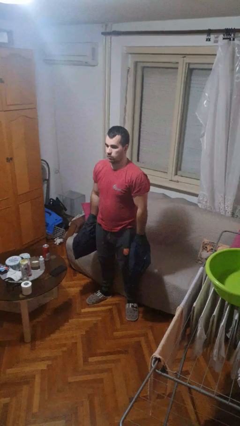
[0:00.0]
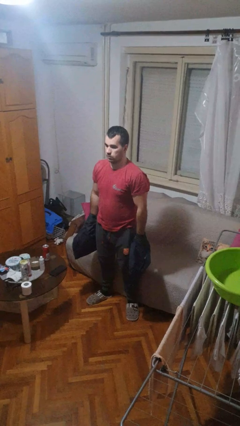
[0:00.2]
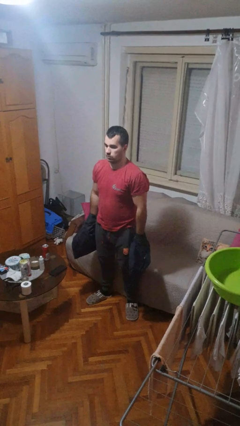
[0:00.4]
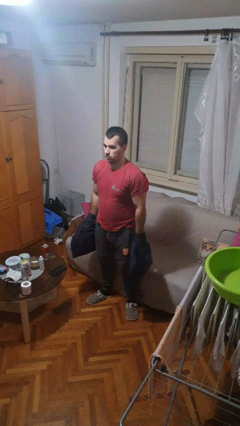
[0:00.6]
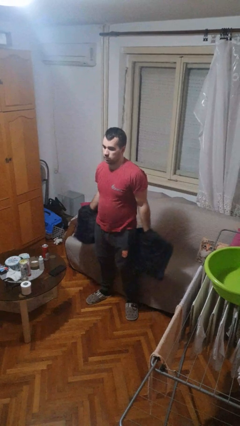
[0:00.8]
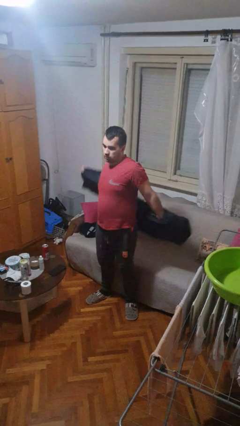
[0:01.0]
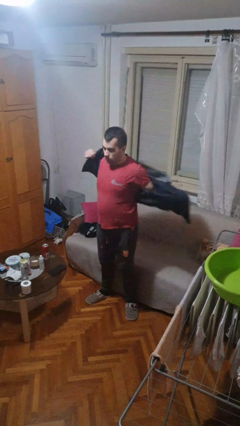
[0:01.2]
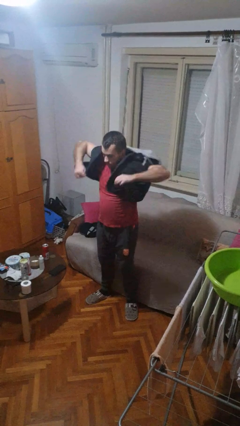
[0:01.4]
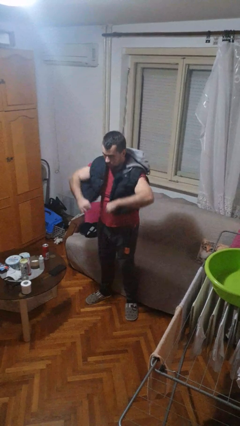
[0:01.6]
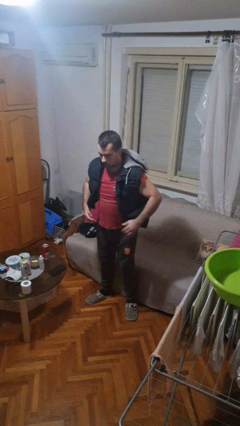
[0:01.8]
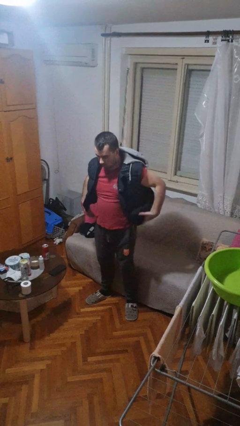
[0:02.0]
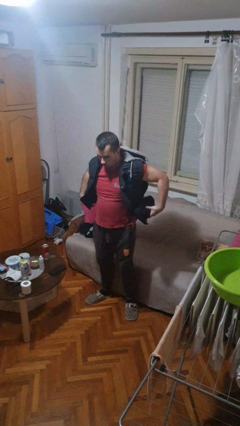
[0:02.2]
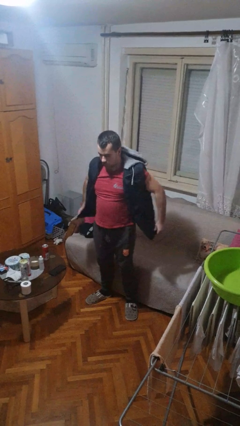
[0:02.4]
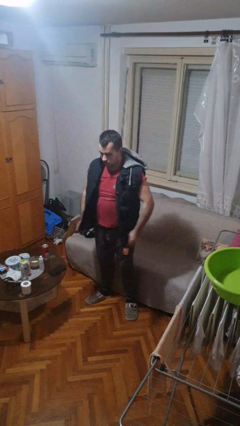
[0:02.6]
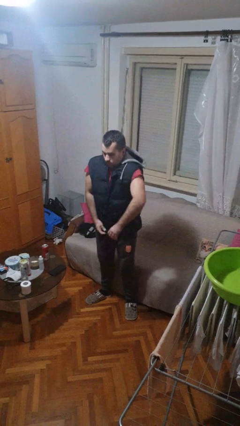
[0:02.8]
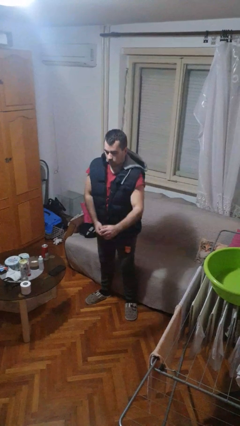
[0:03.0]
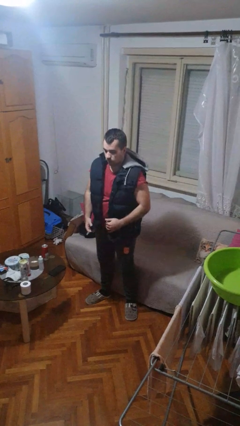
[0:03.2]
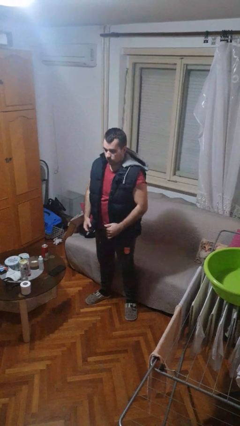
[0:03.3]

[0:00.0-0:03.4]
person puts on jacket

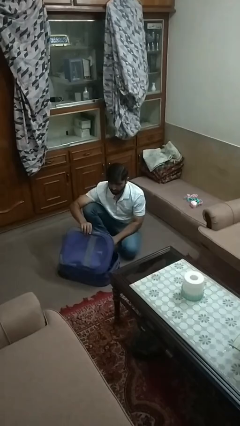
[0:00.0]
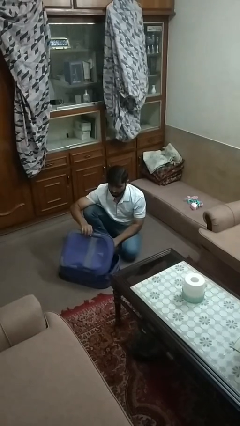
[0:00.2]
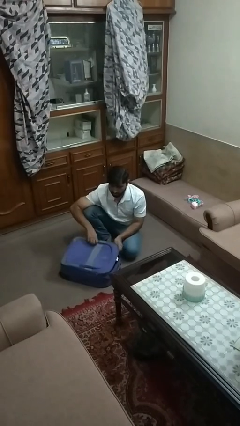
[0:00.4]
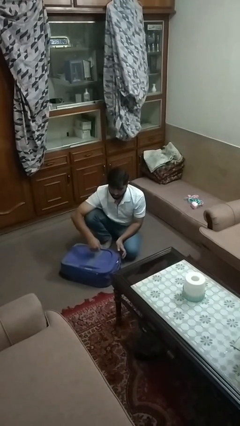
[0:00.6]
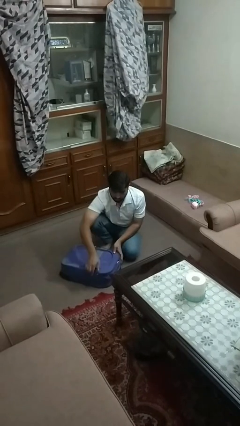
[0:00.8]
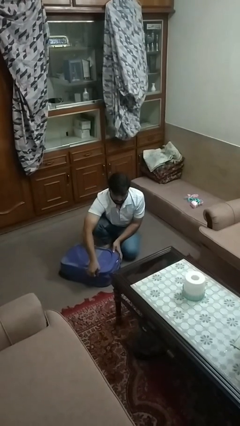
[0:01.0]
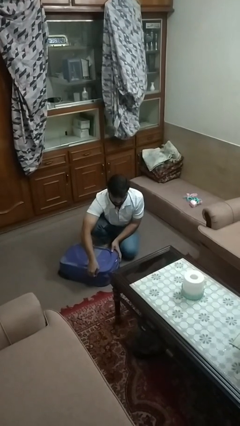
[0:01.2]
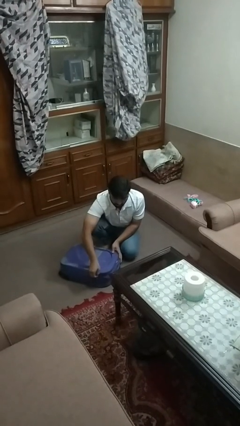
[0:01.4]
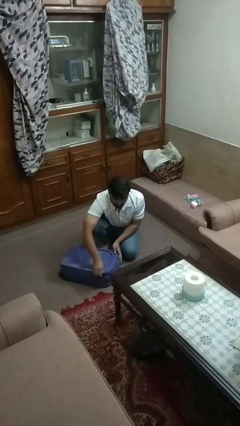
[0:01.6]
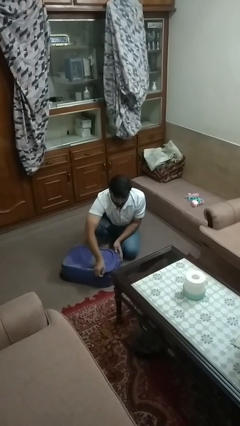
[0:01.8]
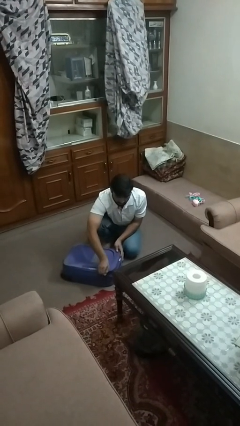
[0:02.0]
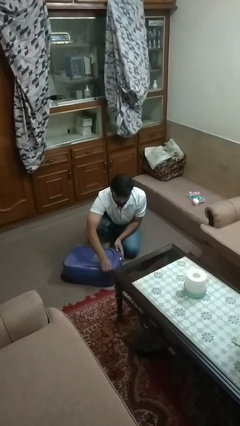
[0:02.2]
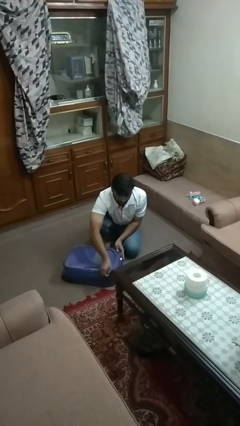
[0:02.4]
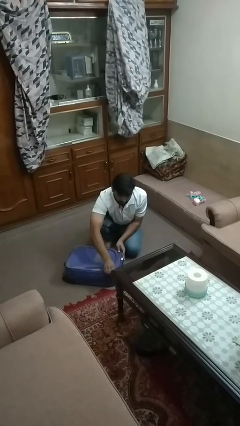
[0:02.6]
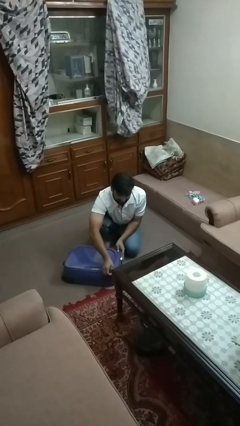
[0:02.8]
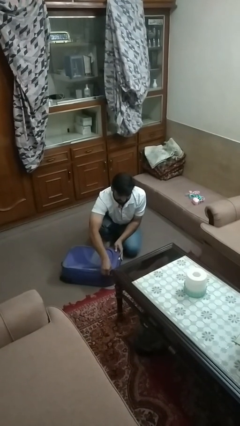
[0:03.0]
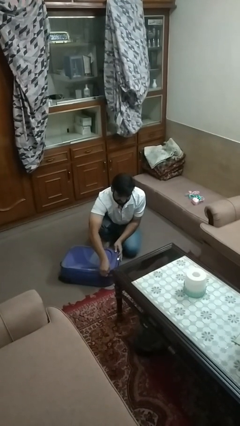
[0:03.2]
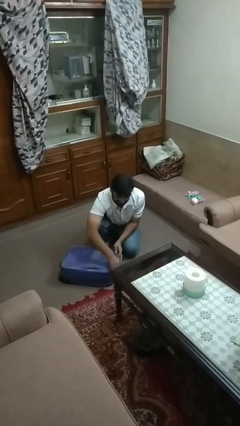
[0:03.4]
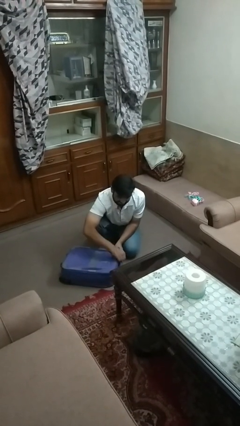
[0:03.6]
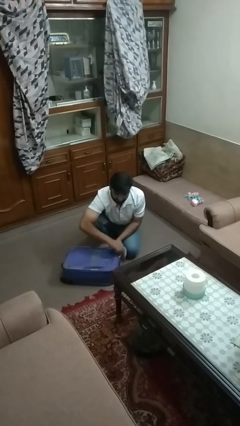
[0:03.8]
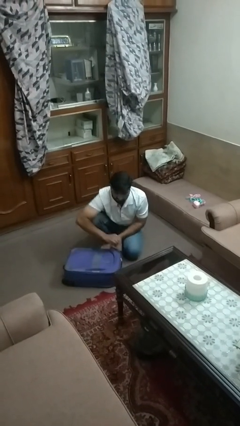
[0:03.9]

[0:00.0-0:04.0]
person closes suitcase

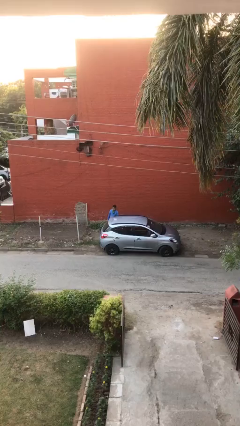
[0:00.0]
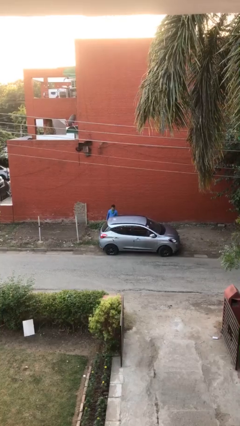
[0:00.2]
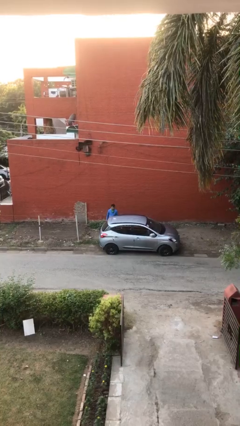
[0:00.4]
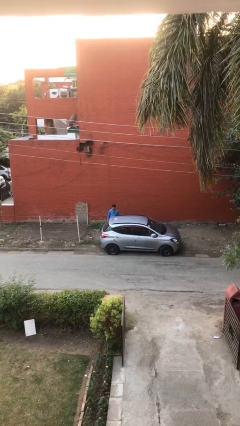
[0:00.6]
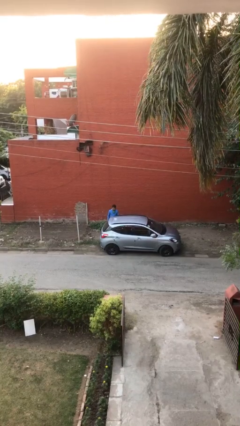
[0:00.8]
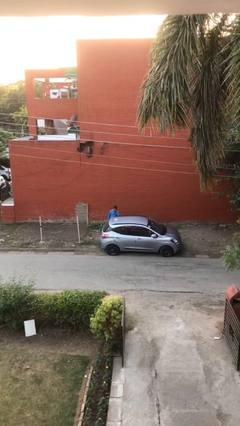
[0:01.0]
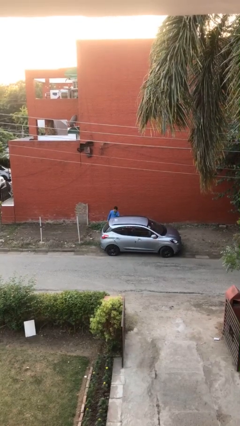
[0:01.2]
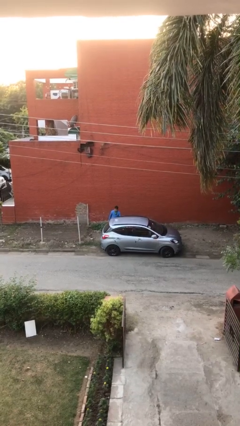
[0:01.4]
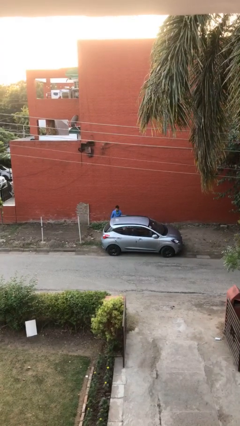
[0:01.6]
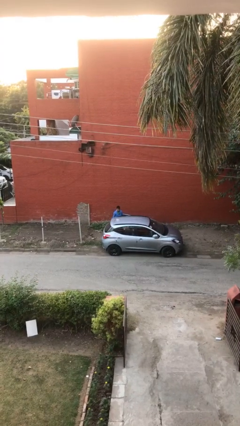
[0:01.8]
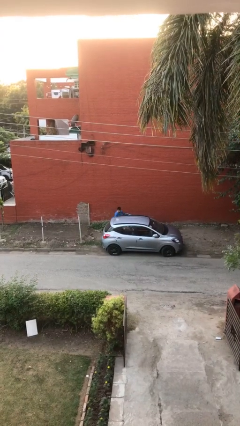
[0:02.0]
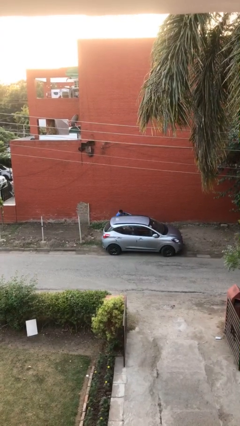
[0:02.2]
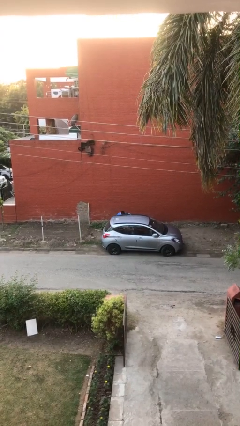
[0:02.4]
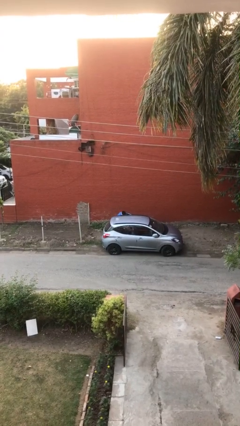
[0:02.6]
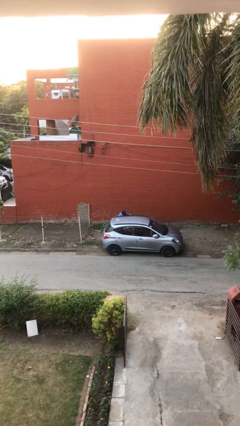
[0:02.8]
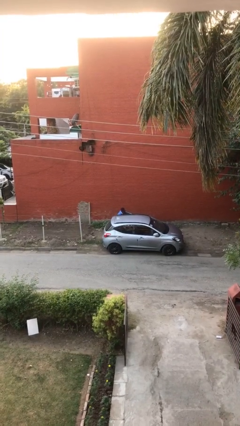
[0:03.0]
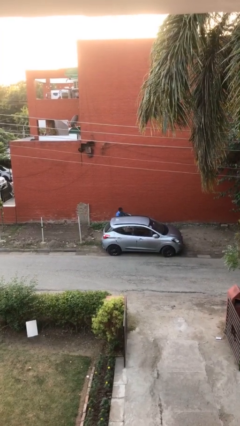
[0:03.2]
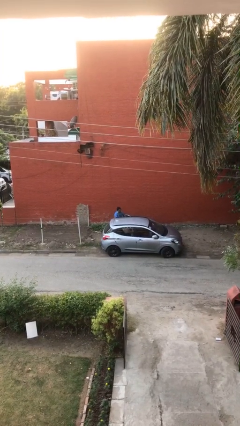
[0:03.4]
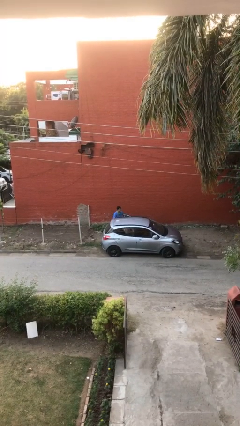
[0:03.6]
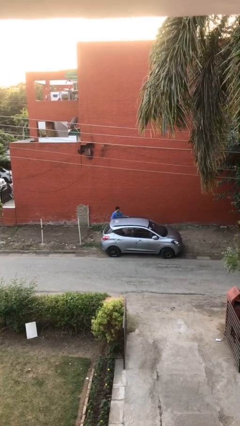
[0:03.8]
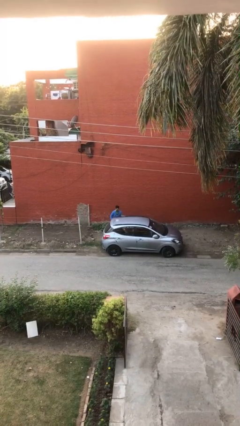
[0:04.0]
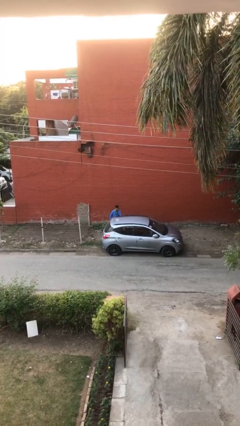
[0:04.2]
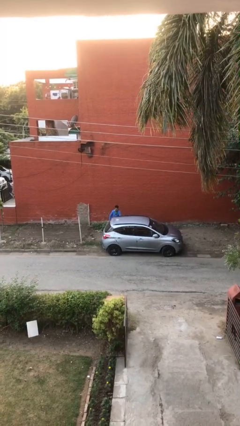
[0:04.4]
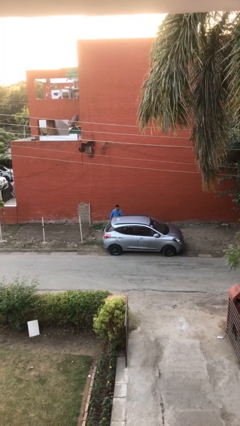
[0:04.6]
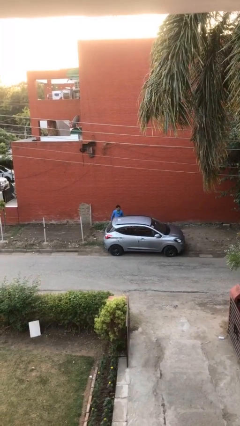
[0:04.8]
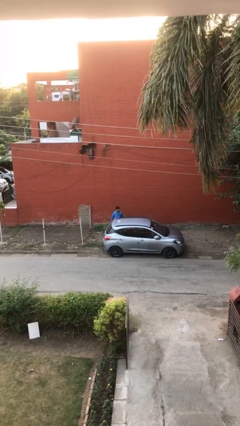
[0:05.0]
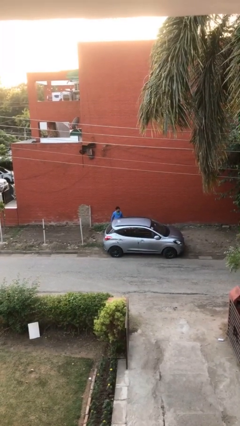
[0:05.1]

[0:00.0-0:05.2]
person unloads car

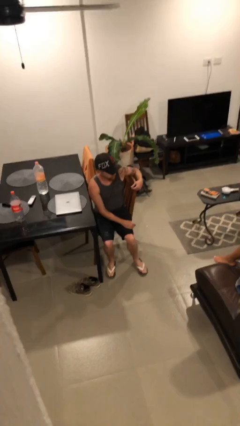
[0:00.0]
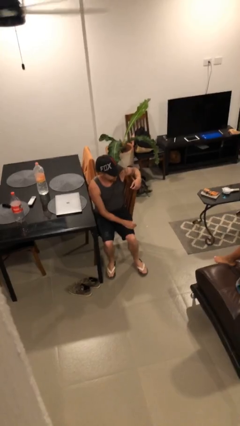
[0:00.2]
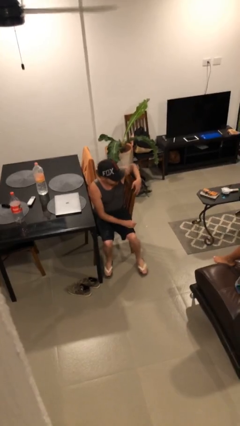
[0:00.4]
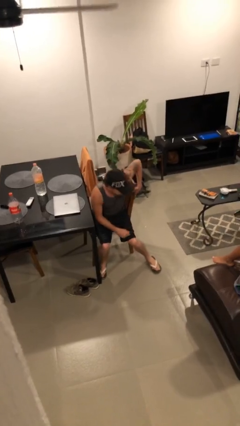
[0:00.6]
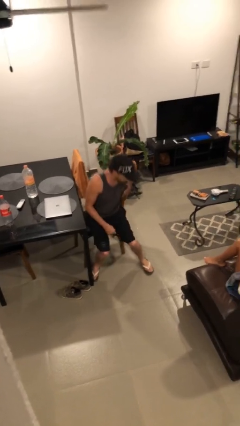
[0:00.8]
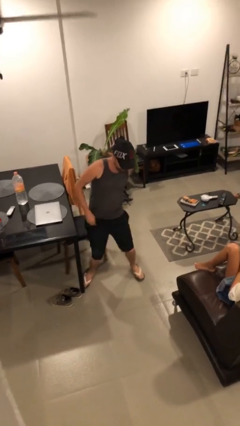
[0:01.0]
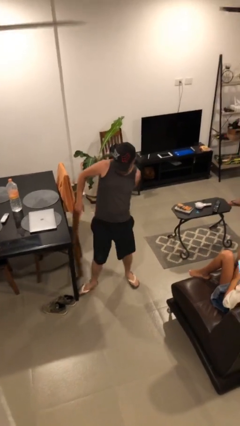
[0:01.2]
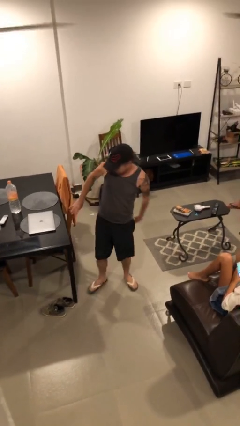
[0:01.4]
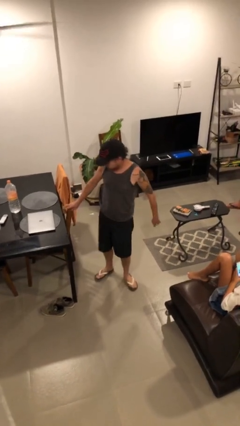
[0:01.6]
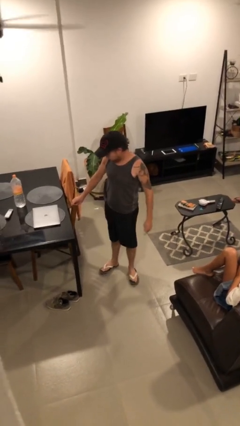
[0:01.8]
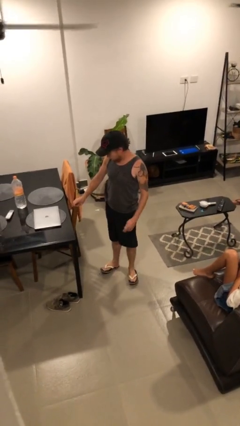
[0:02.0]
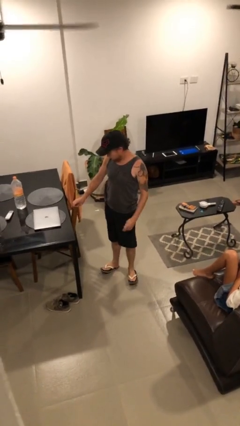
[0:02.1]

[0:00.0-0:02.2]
person stands up

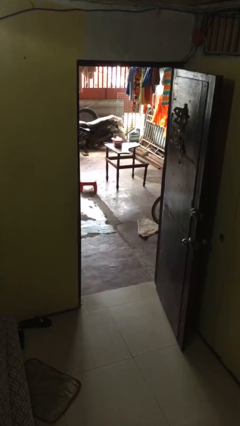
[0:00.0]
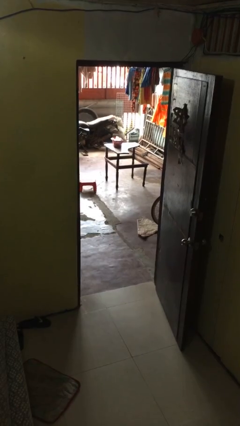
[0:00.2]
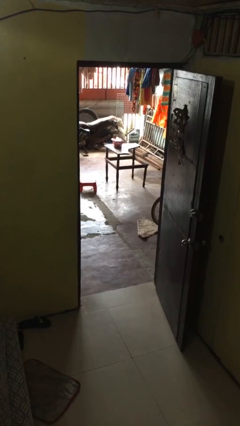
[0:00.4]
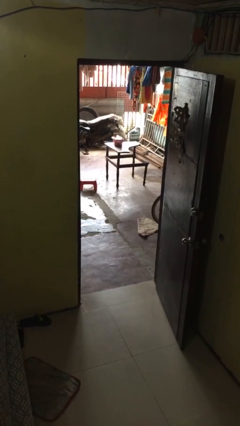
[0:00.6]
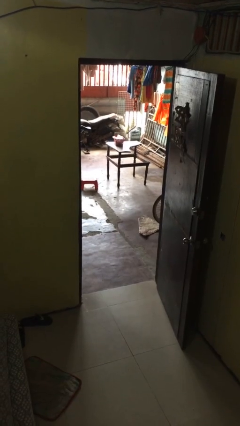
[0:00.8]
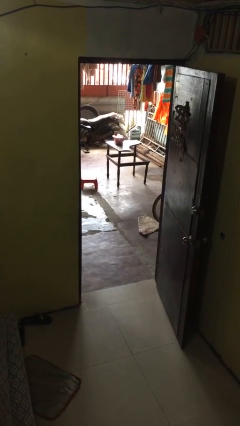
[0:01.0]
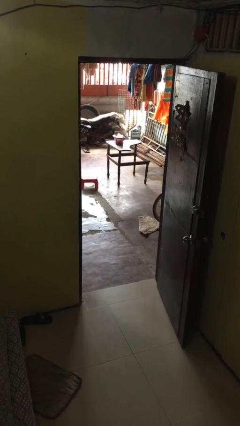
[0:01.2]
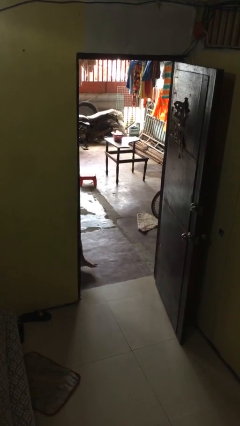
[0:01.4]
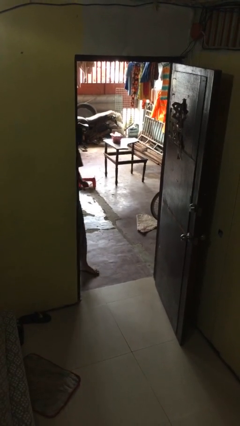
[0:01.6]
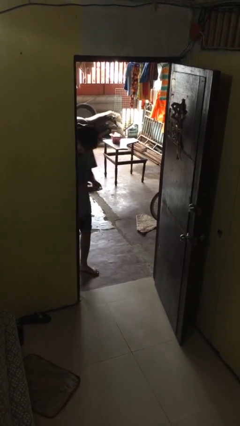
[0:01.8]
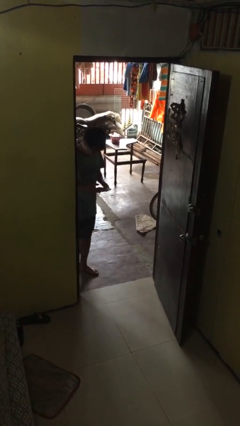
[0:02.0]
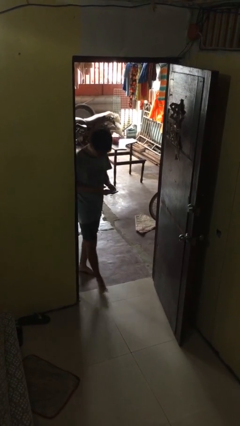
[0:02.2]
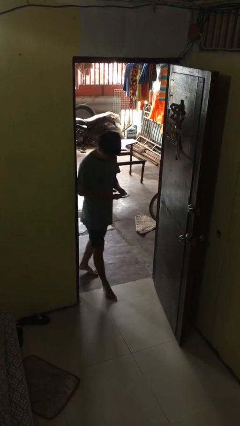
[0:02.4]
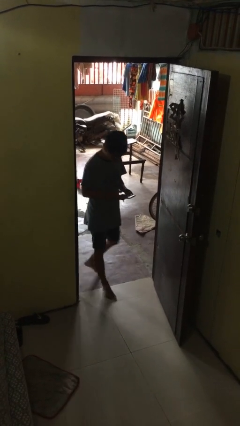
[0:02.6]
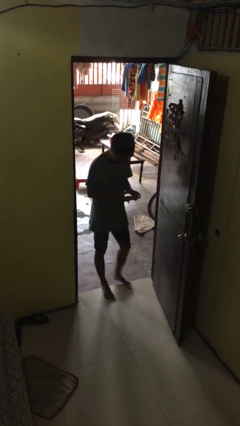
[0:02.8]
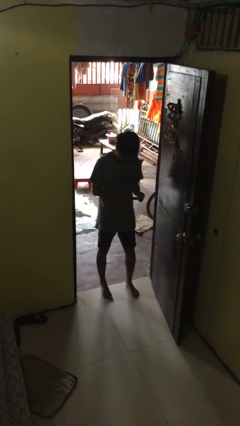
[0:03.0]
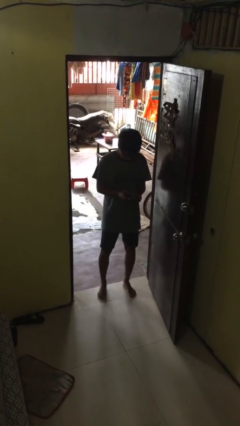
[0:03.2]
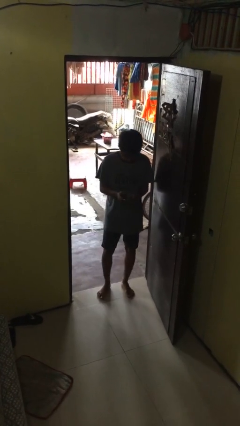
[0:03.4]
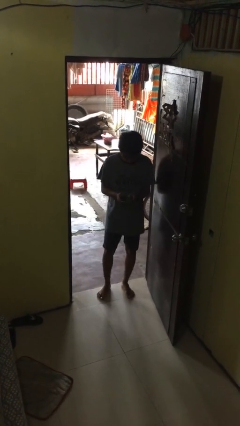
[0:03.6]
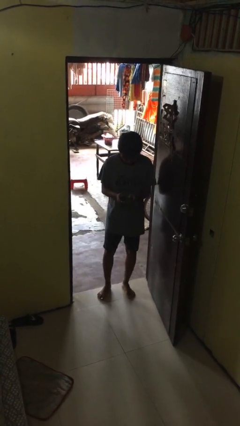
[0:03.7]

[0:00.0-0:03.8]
person enters scene through structure
